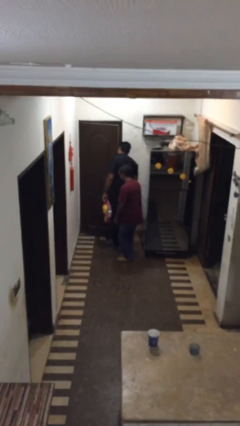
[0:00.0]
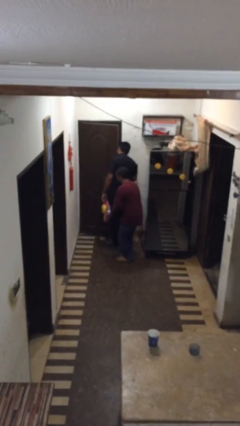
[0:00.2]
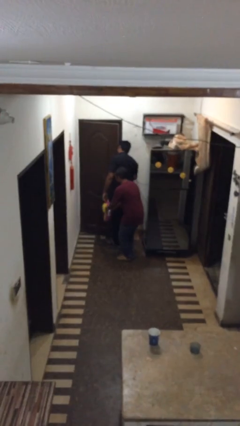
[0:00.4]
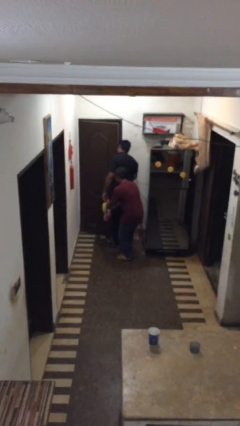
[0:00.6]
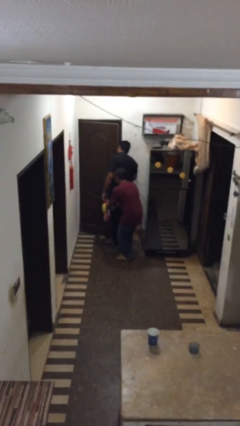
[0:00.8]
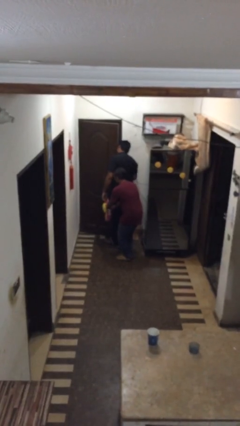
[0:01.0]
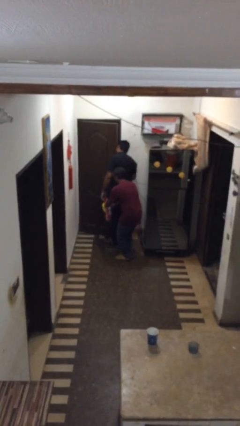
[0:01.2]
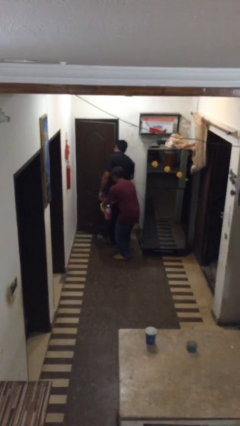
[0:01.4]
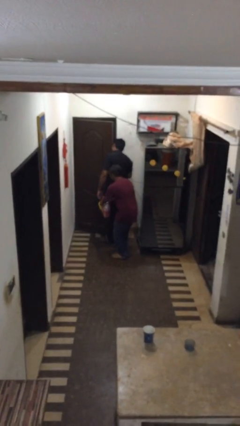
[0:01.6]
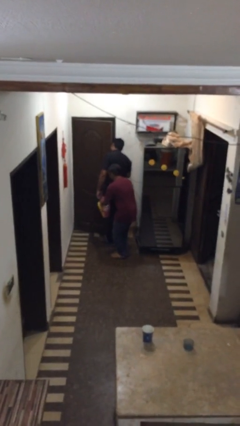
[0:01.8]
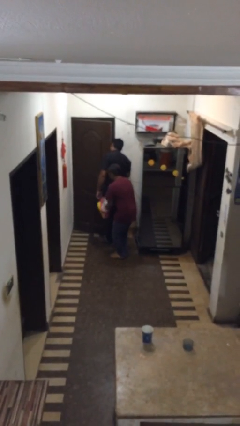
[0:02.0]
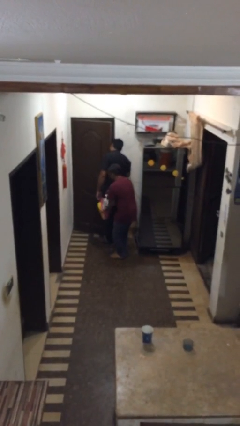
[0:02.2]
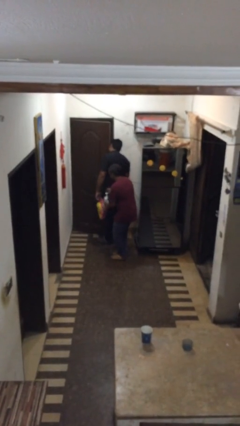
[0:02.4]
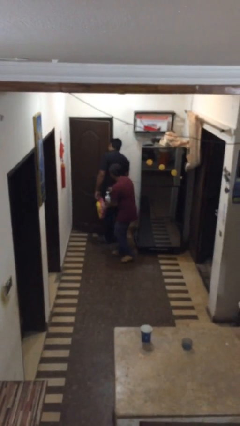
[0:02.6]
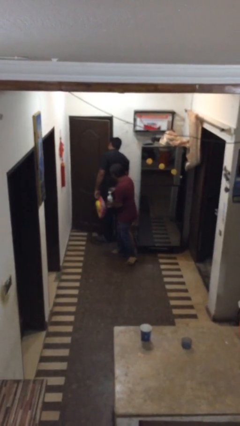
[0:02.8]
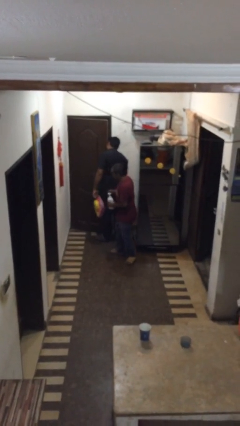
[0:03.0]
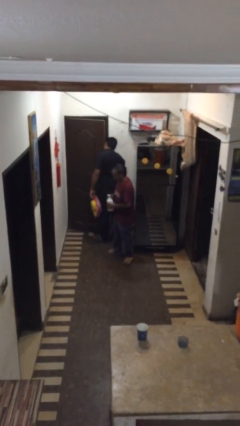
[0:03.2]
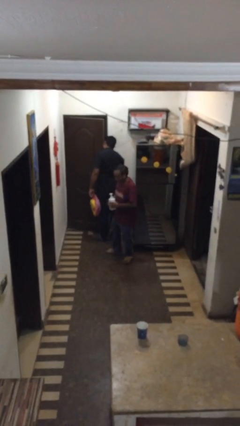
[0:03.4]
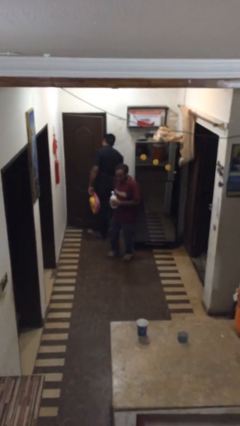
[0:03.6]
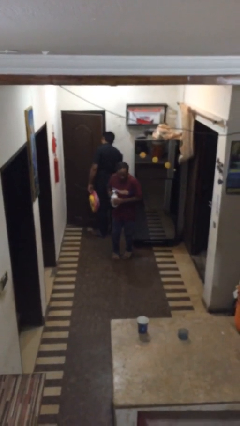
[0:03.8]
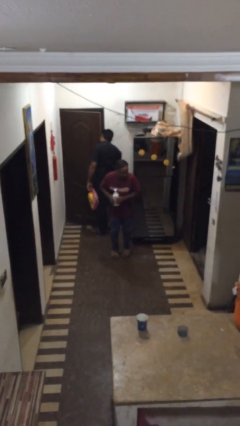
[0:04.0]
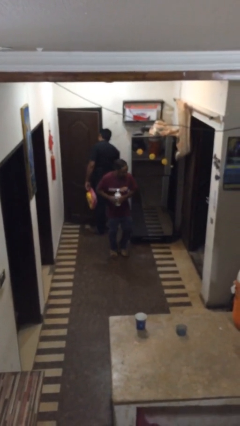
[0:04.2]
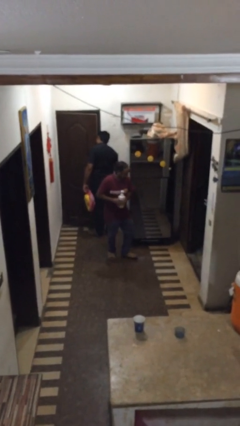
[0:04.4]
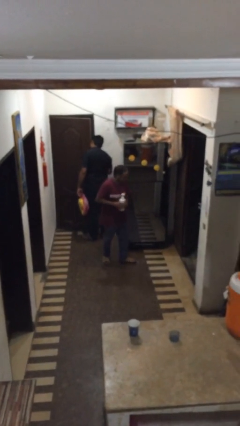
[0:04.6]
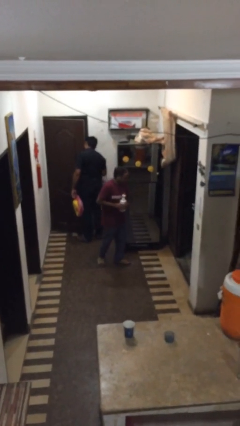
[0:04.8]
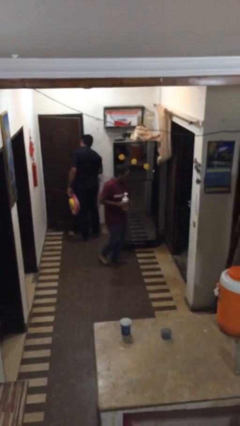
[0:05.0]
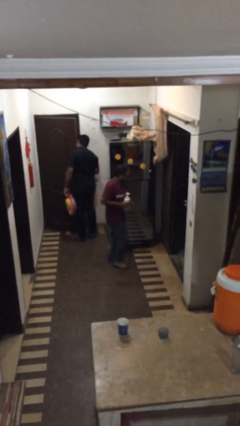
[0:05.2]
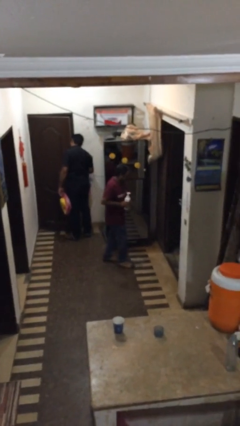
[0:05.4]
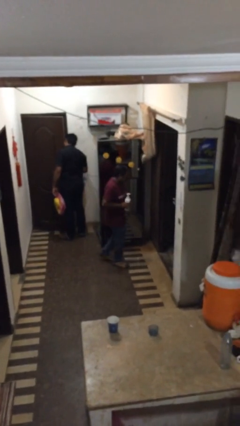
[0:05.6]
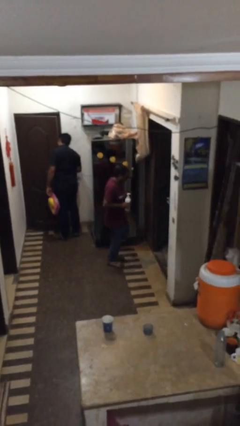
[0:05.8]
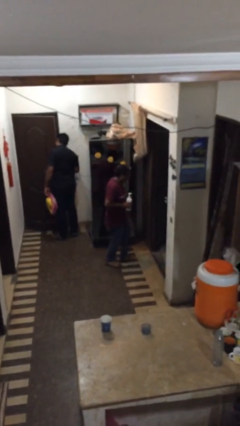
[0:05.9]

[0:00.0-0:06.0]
person steals object from person

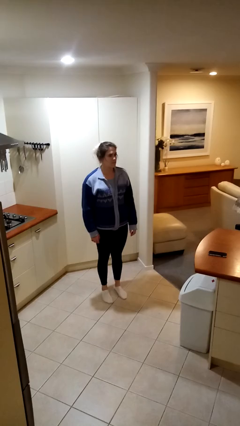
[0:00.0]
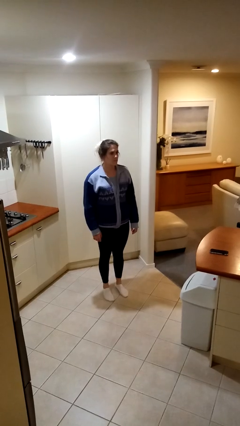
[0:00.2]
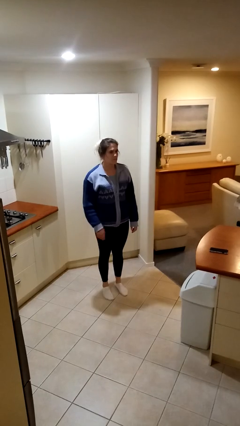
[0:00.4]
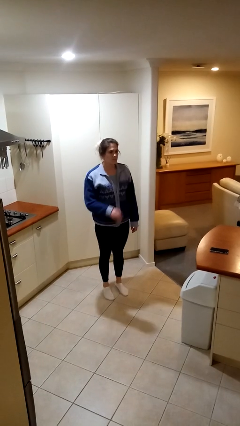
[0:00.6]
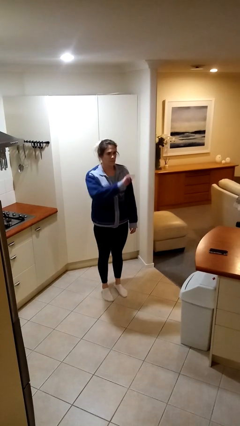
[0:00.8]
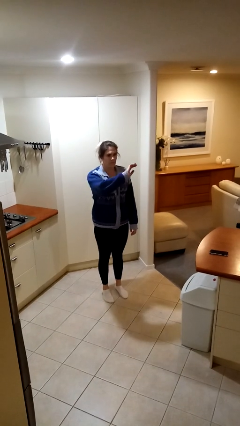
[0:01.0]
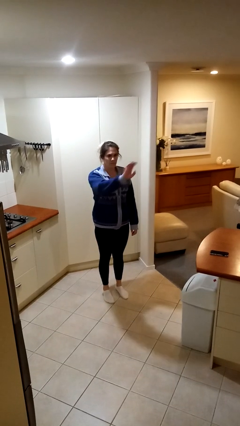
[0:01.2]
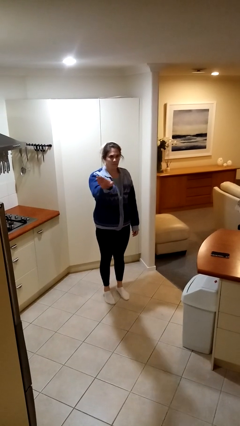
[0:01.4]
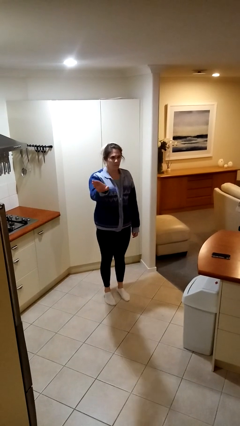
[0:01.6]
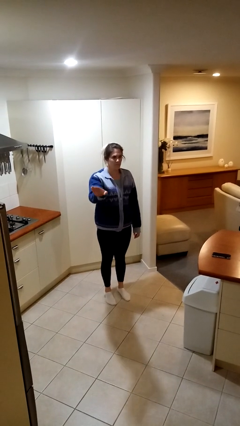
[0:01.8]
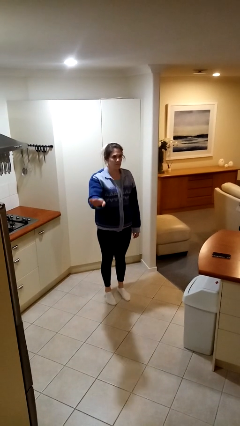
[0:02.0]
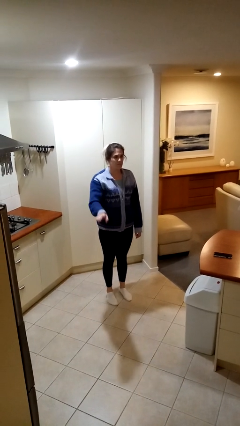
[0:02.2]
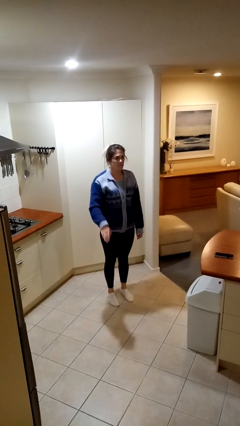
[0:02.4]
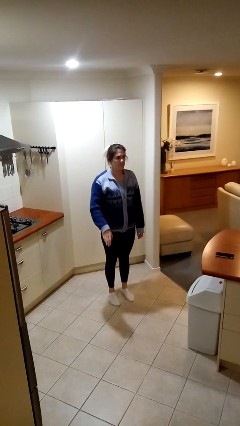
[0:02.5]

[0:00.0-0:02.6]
person gestures swipe right

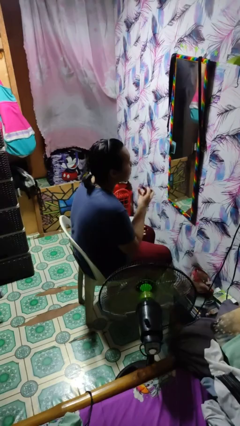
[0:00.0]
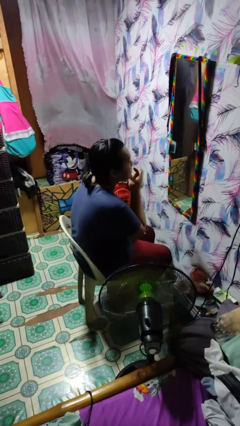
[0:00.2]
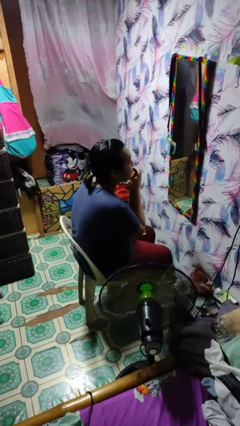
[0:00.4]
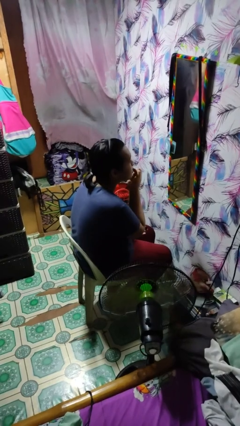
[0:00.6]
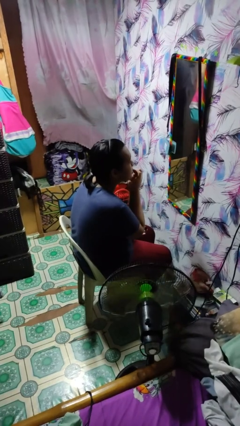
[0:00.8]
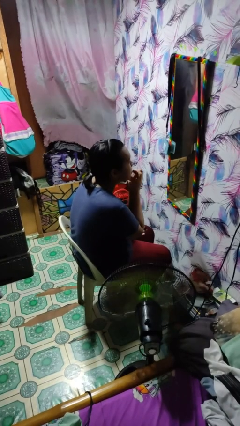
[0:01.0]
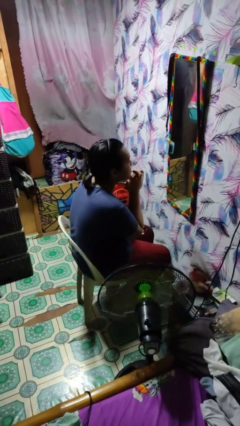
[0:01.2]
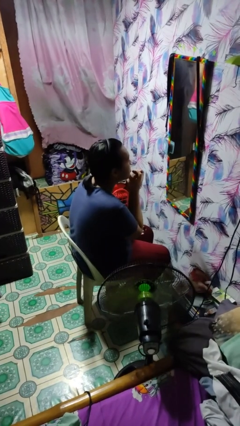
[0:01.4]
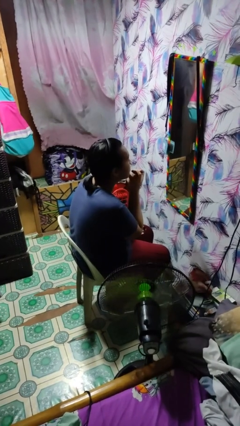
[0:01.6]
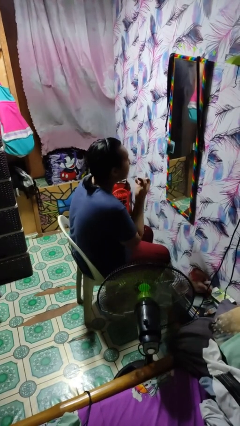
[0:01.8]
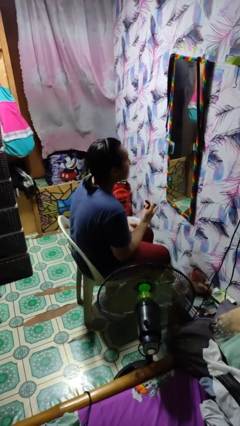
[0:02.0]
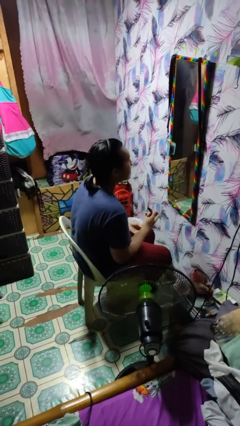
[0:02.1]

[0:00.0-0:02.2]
person applies lip makeup

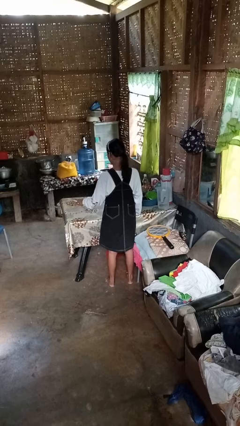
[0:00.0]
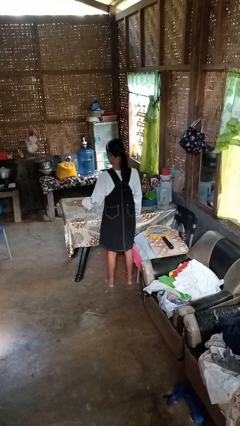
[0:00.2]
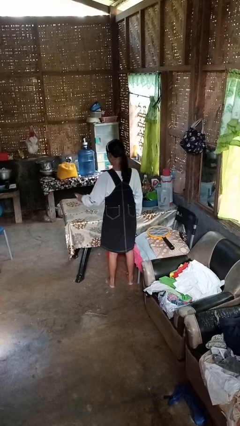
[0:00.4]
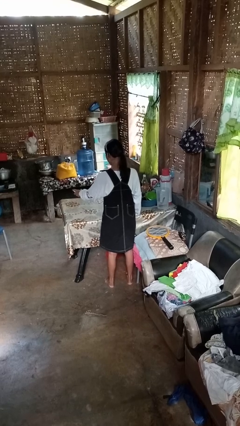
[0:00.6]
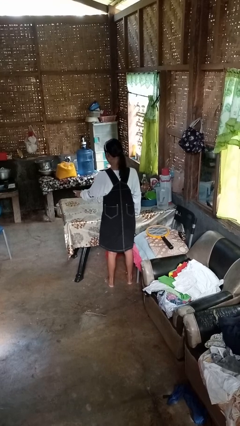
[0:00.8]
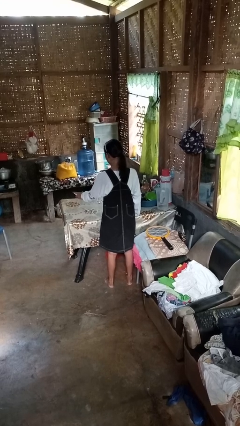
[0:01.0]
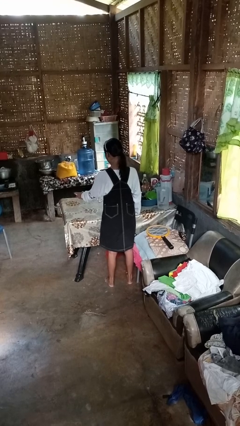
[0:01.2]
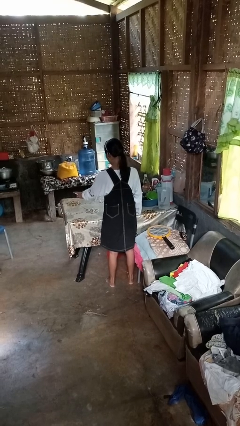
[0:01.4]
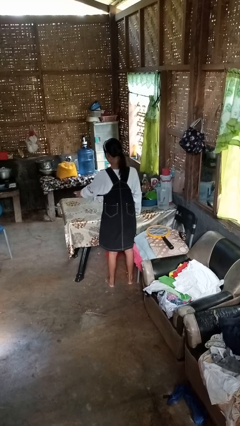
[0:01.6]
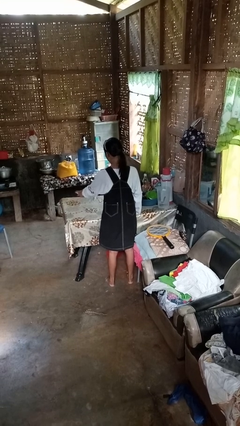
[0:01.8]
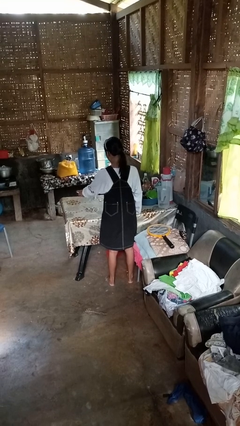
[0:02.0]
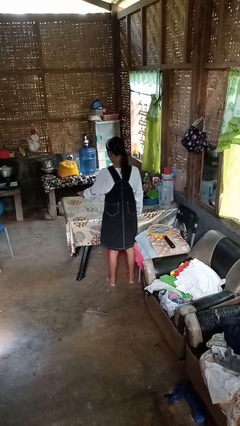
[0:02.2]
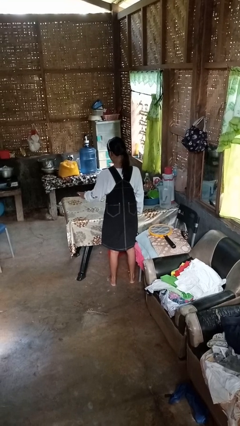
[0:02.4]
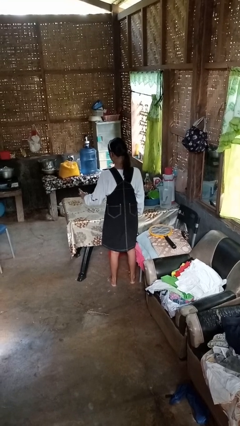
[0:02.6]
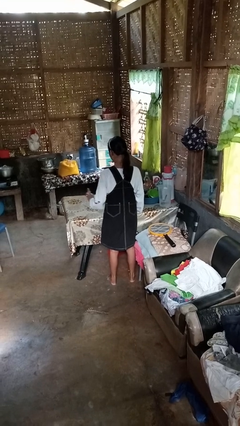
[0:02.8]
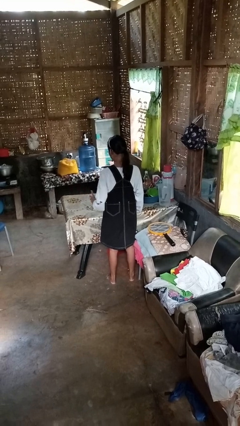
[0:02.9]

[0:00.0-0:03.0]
person sprays from bottle

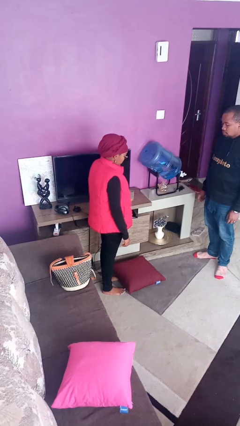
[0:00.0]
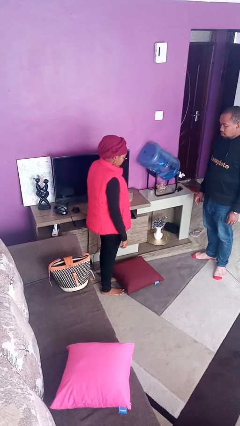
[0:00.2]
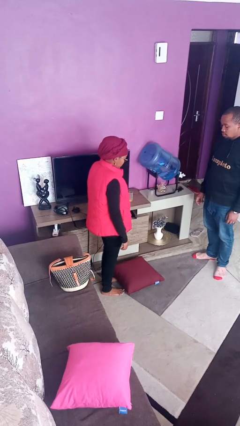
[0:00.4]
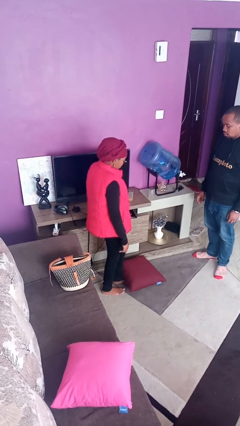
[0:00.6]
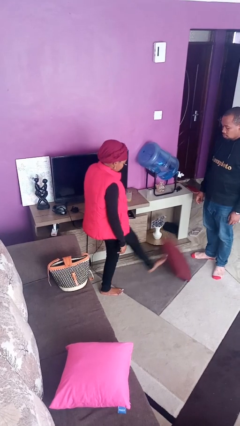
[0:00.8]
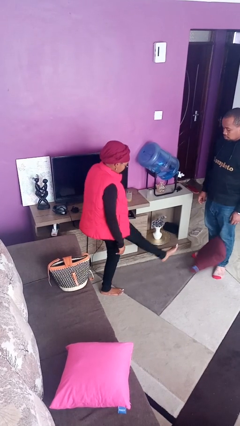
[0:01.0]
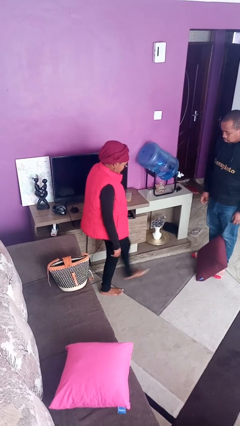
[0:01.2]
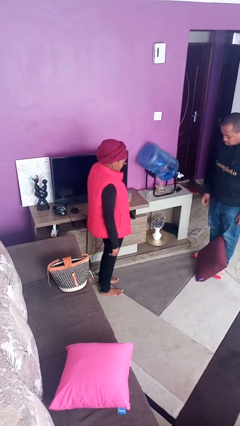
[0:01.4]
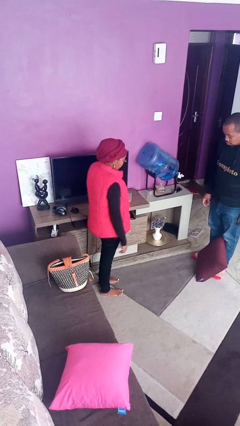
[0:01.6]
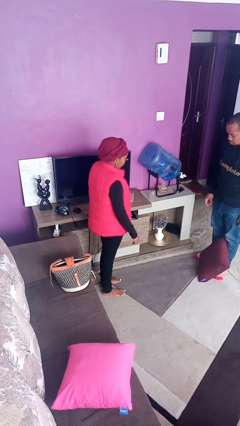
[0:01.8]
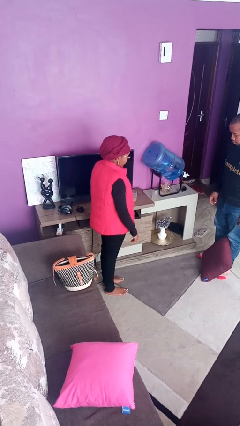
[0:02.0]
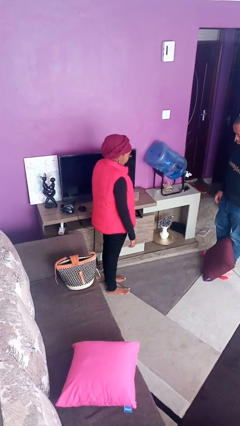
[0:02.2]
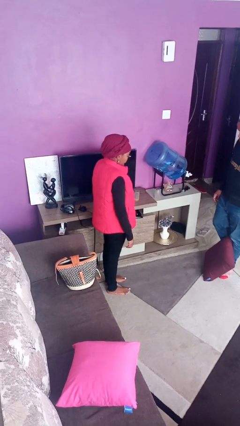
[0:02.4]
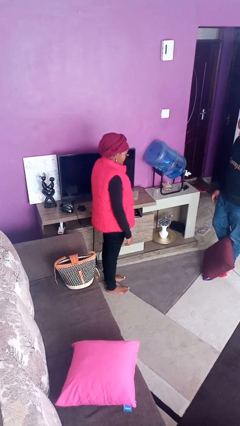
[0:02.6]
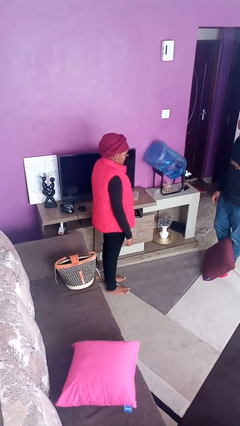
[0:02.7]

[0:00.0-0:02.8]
person kicks object to person

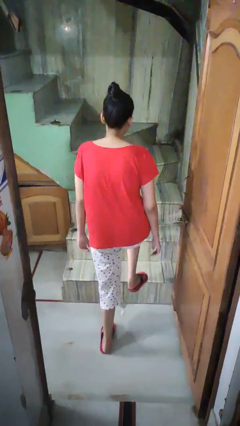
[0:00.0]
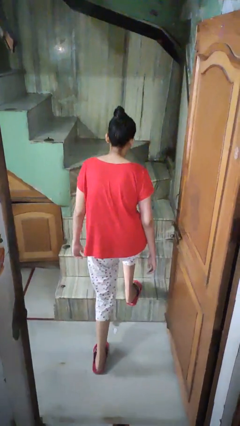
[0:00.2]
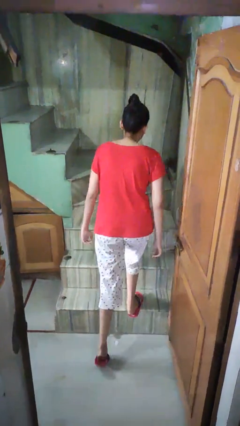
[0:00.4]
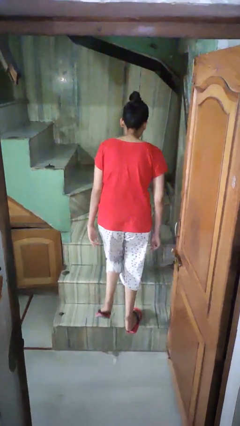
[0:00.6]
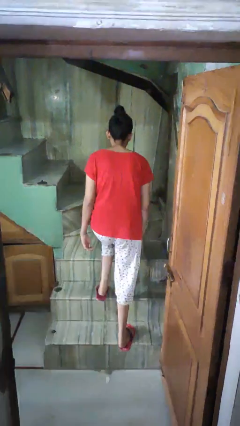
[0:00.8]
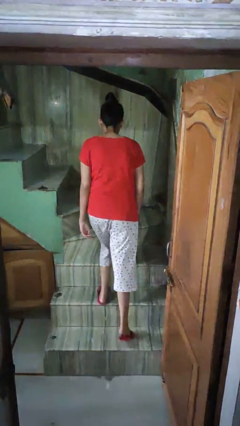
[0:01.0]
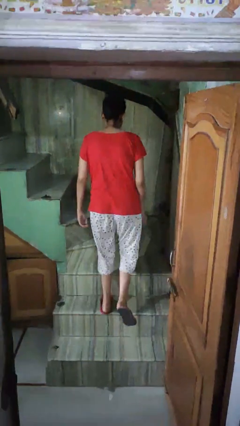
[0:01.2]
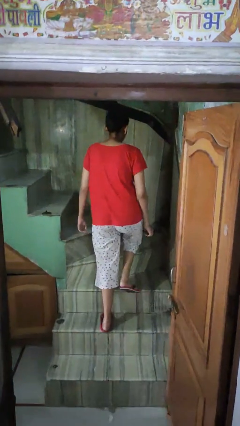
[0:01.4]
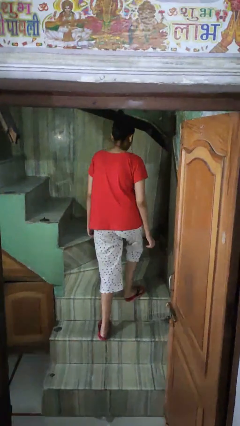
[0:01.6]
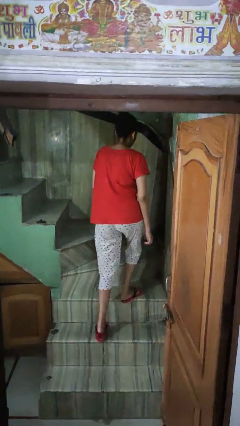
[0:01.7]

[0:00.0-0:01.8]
person climbs up stairs
